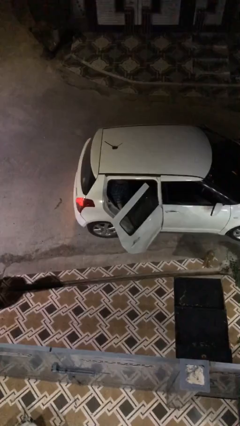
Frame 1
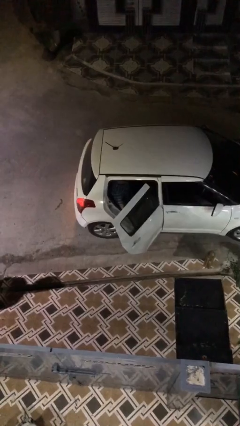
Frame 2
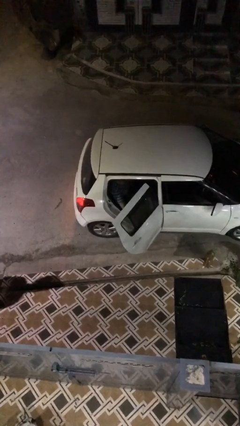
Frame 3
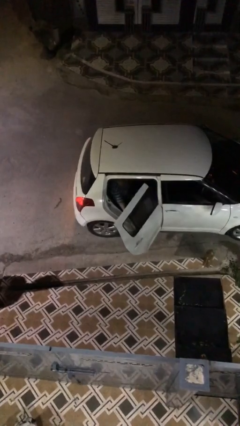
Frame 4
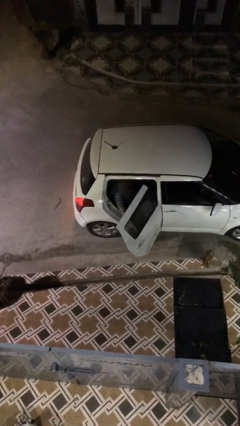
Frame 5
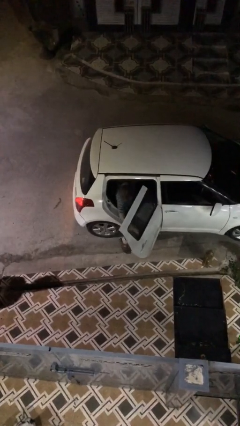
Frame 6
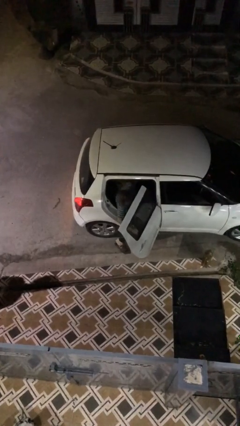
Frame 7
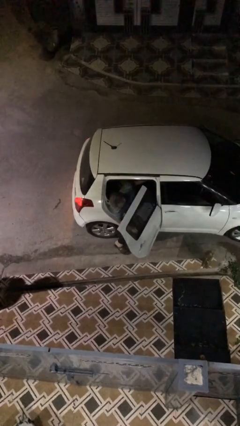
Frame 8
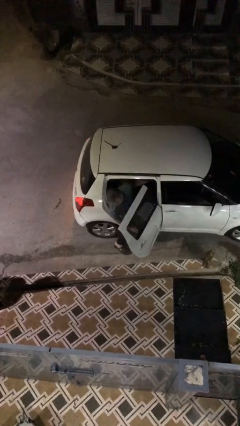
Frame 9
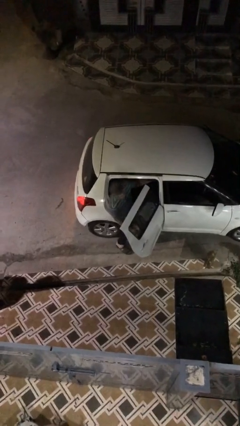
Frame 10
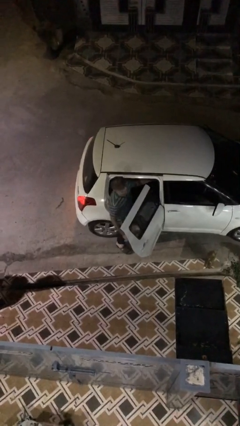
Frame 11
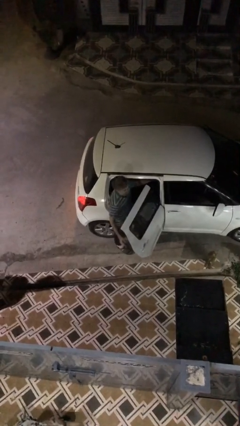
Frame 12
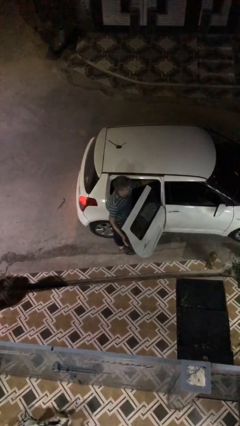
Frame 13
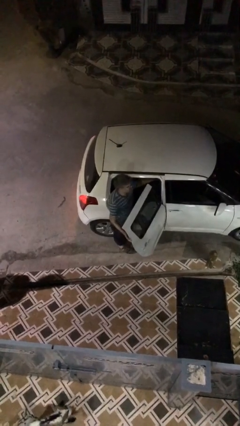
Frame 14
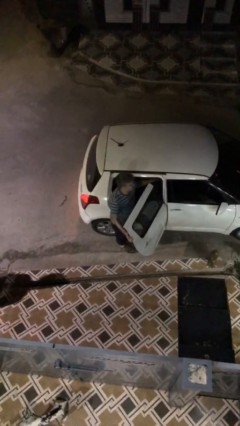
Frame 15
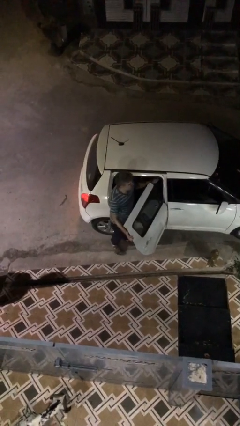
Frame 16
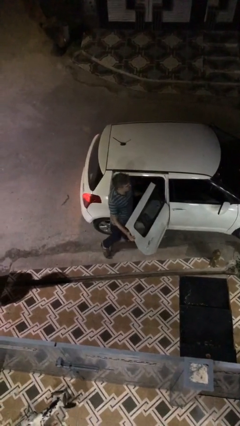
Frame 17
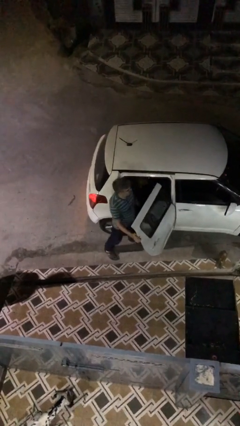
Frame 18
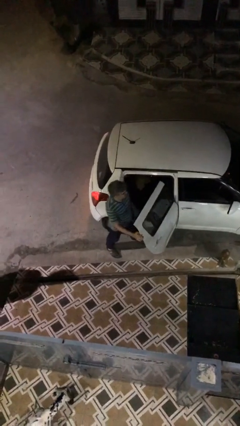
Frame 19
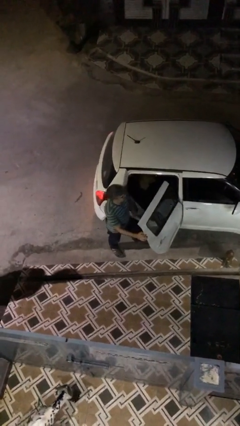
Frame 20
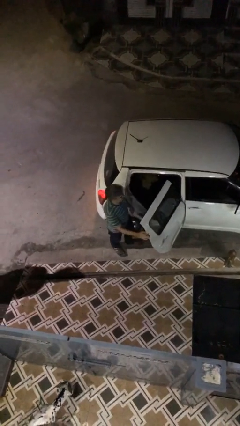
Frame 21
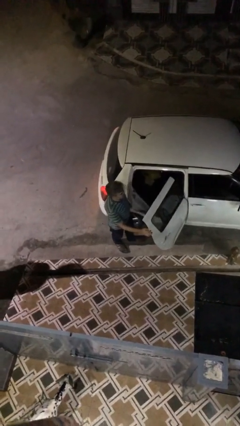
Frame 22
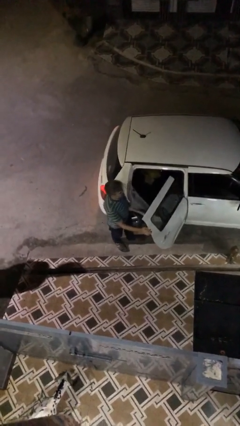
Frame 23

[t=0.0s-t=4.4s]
person exits car

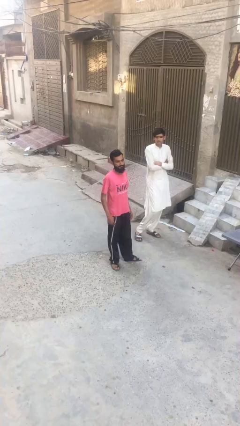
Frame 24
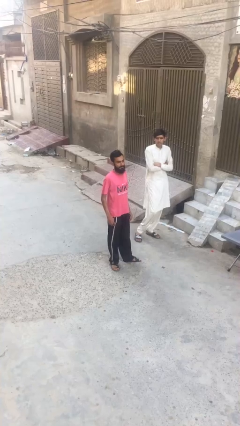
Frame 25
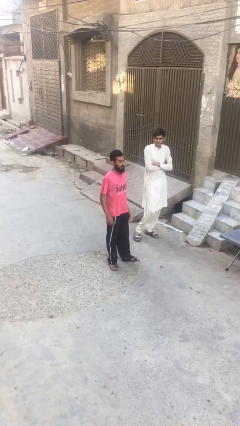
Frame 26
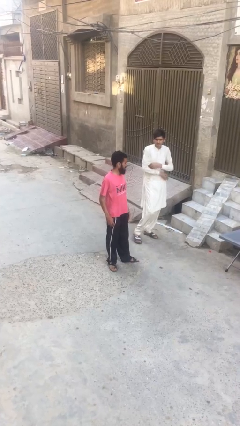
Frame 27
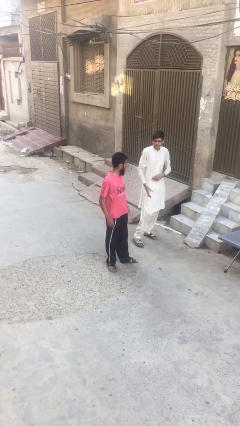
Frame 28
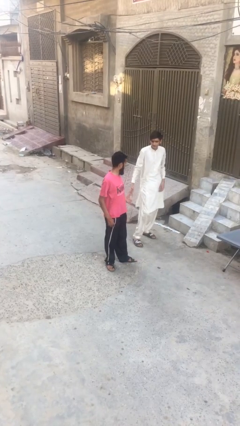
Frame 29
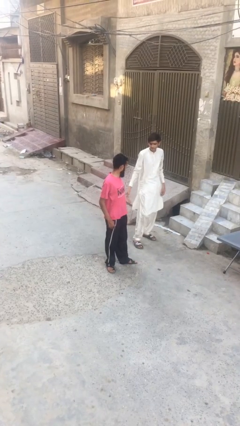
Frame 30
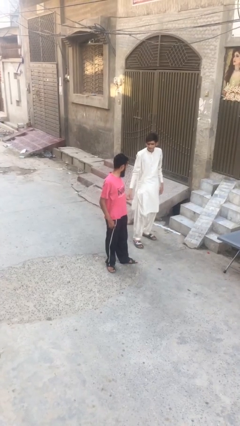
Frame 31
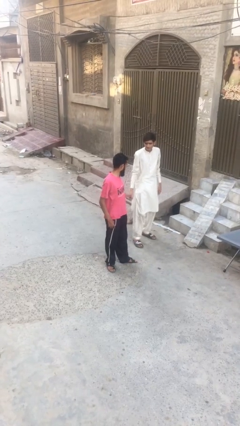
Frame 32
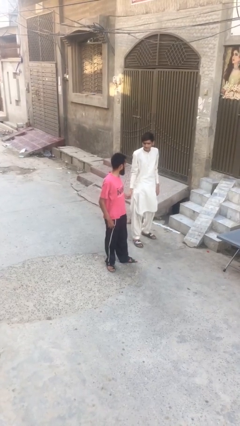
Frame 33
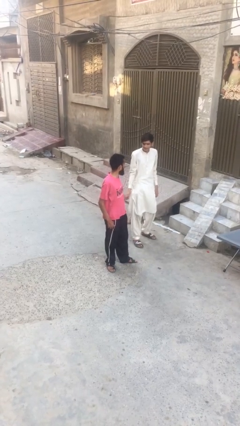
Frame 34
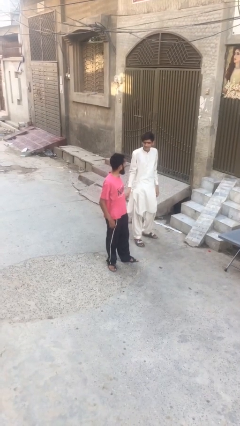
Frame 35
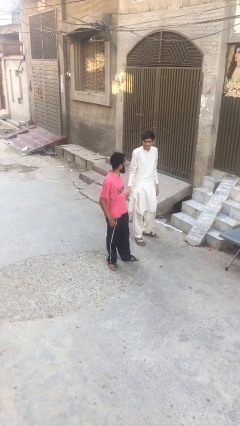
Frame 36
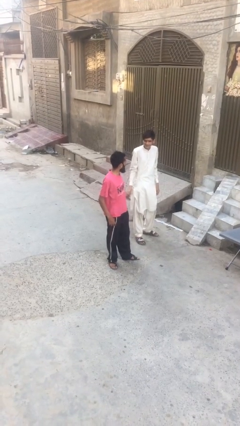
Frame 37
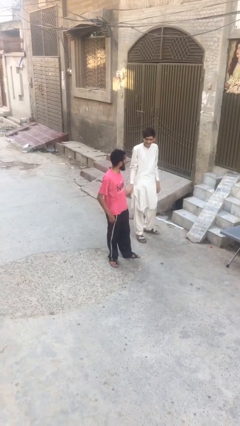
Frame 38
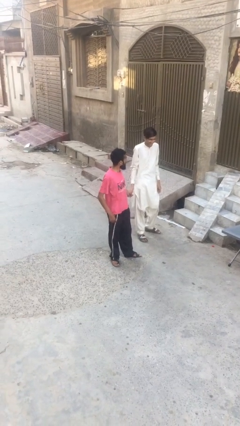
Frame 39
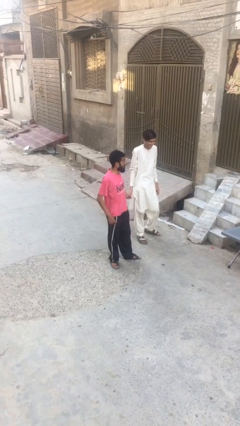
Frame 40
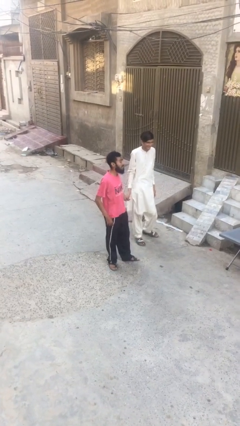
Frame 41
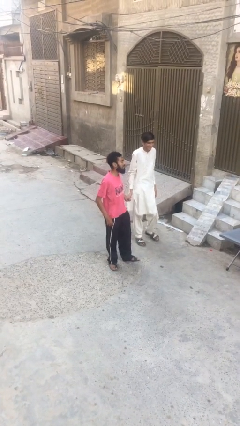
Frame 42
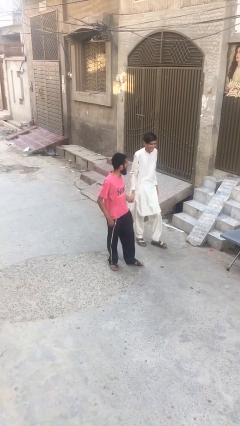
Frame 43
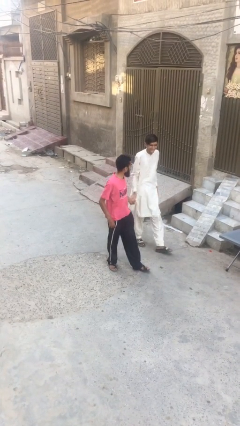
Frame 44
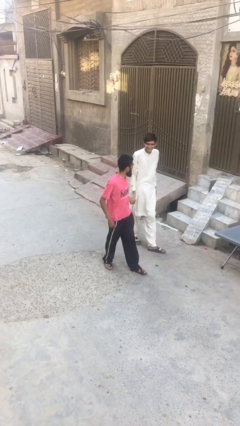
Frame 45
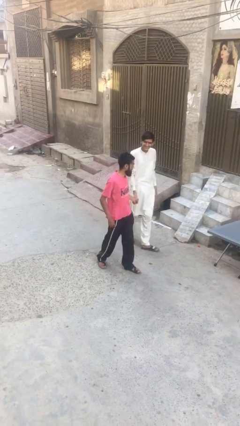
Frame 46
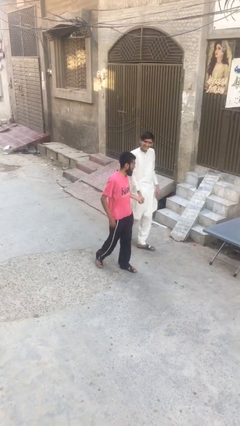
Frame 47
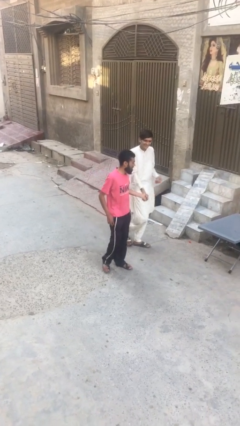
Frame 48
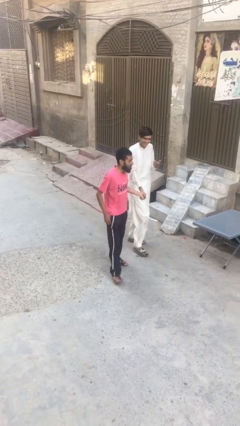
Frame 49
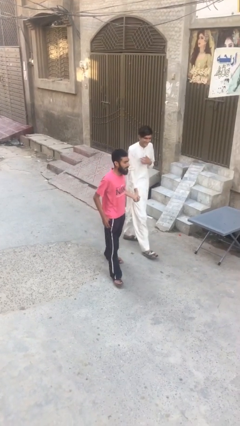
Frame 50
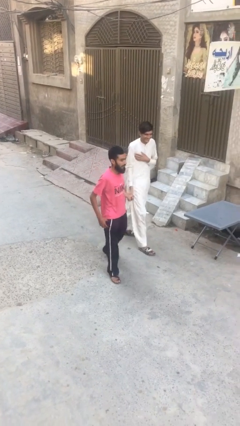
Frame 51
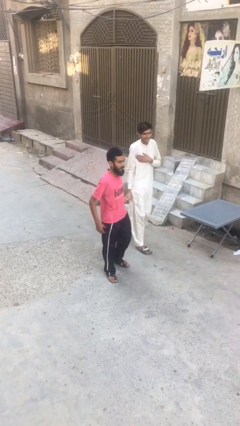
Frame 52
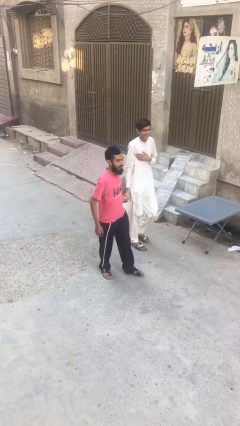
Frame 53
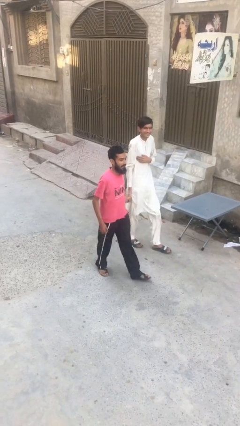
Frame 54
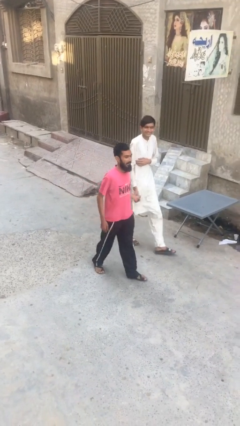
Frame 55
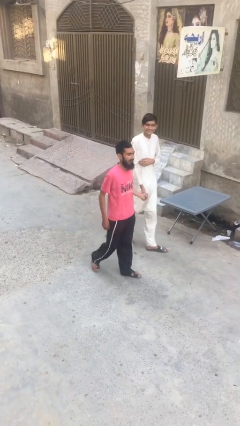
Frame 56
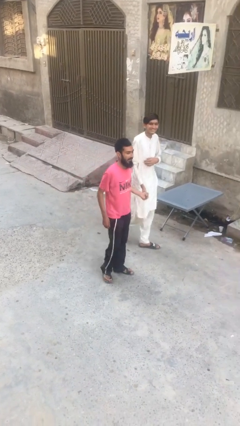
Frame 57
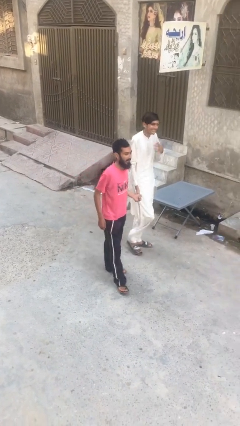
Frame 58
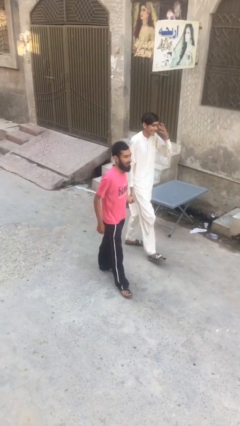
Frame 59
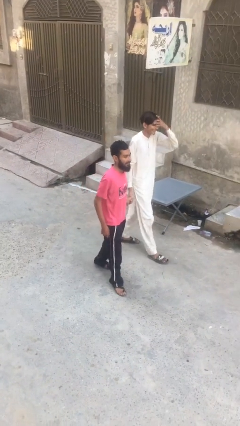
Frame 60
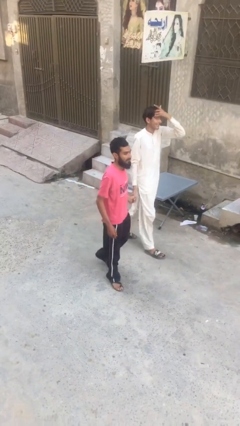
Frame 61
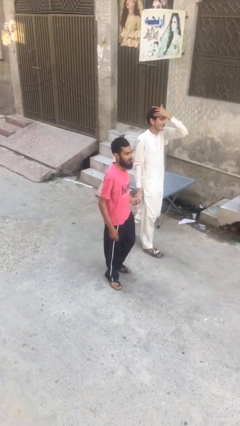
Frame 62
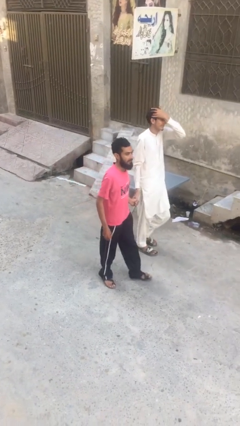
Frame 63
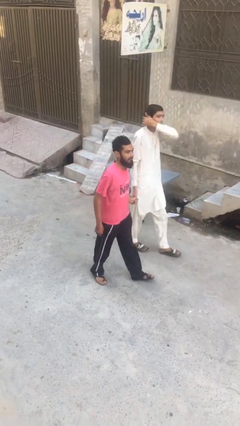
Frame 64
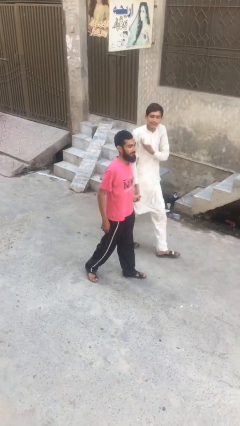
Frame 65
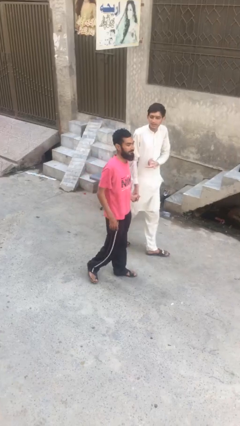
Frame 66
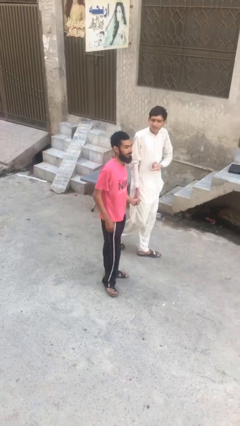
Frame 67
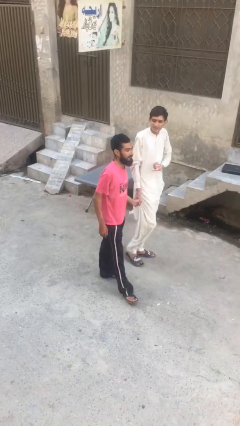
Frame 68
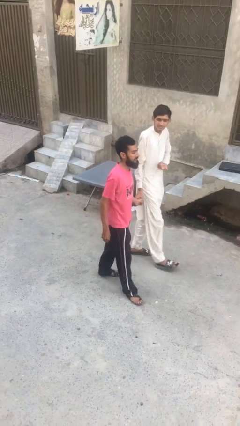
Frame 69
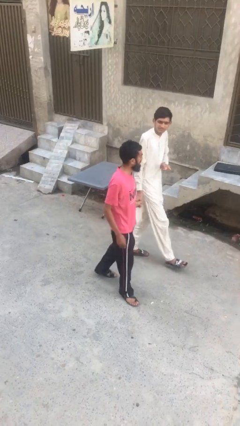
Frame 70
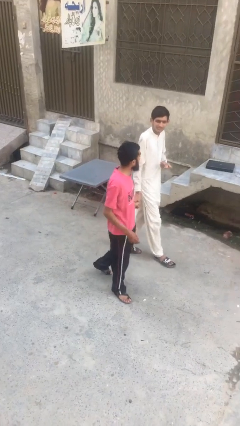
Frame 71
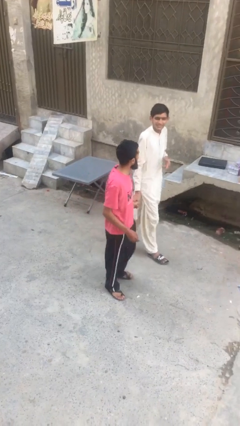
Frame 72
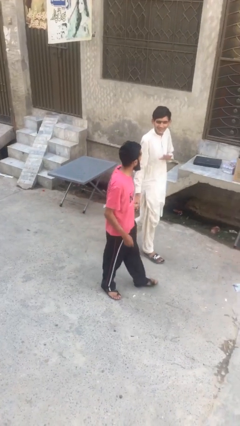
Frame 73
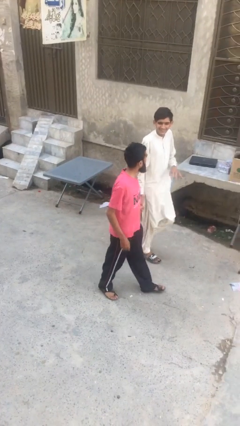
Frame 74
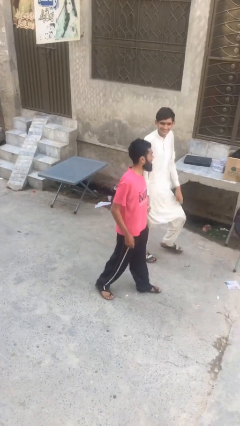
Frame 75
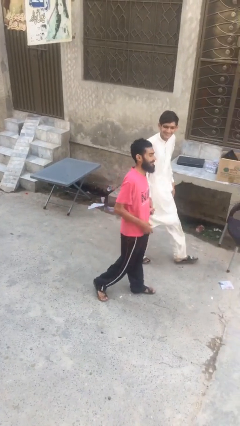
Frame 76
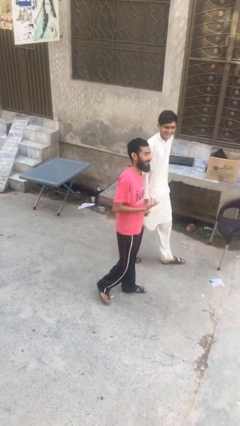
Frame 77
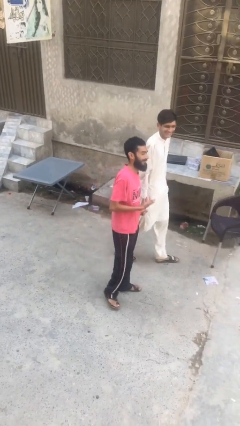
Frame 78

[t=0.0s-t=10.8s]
person holds hand

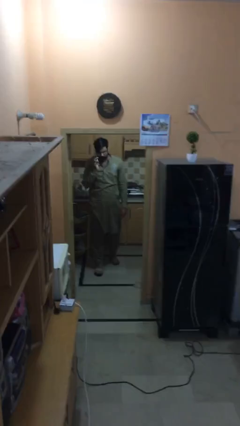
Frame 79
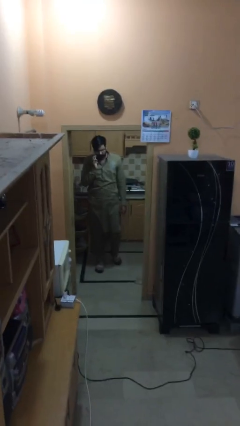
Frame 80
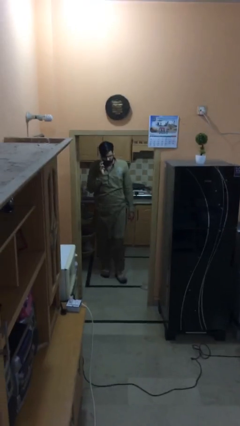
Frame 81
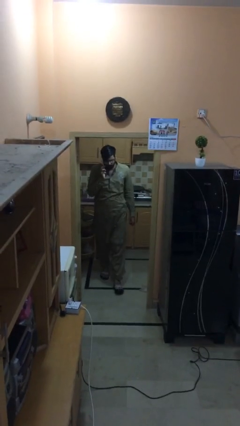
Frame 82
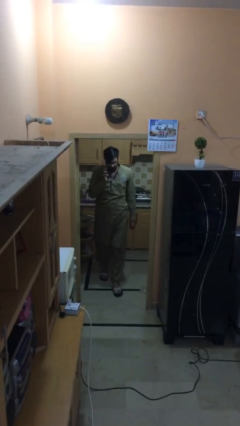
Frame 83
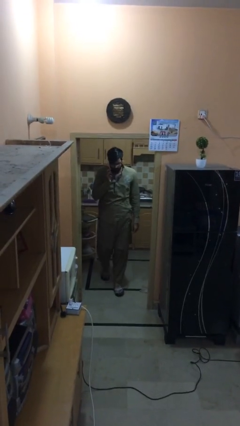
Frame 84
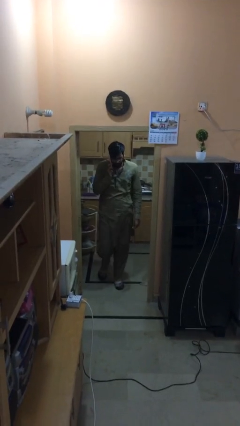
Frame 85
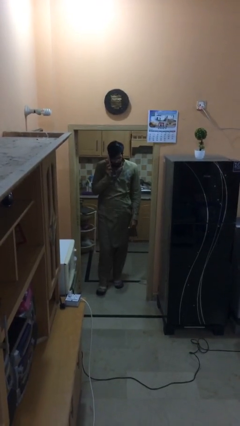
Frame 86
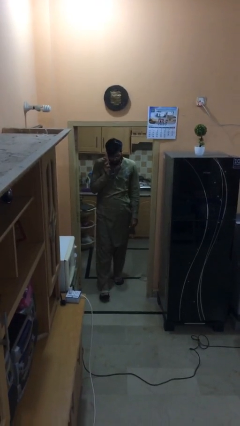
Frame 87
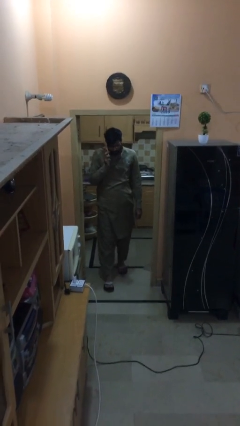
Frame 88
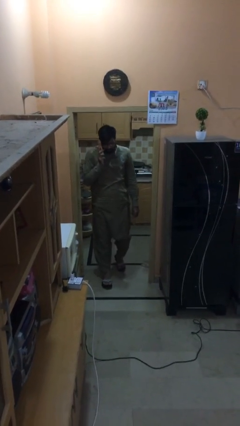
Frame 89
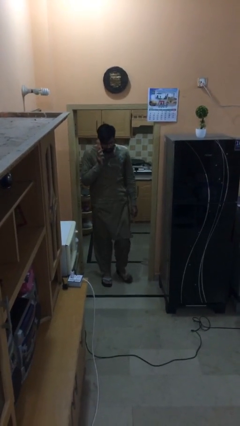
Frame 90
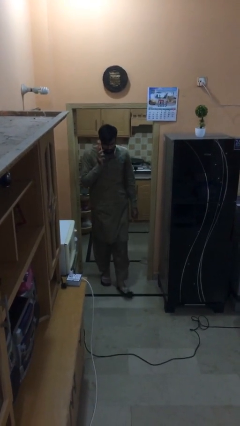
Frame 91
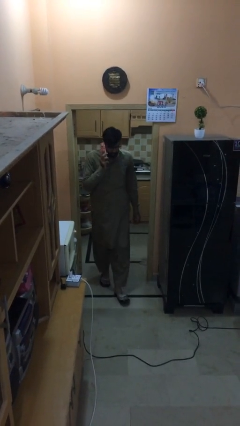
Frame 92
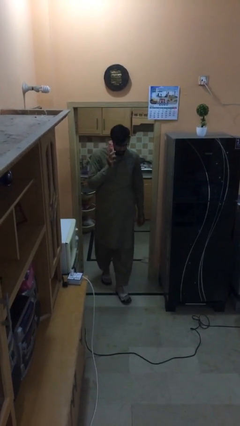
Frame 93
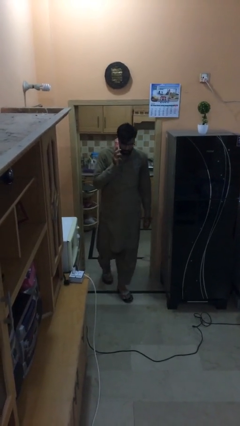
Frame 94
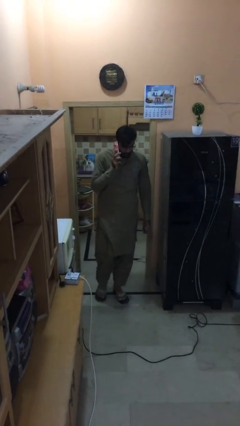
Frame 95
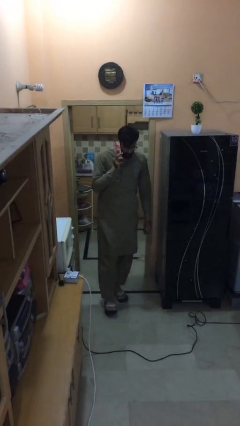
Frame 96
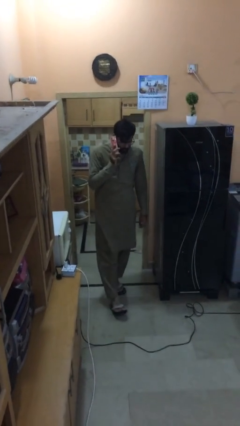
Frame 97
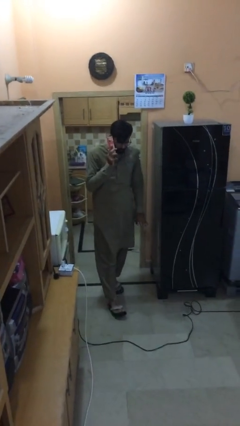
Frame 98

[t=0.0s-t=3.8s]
person enters scene through structure
